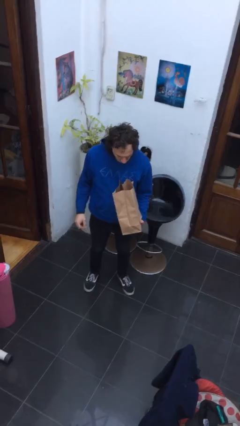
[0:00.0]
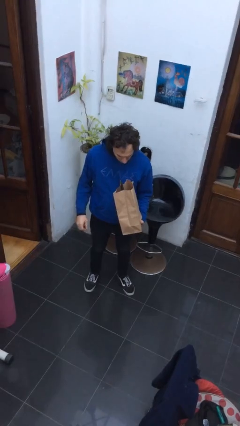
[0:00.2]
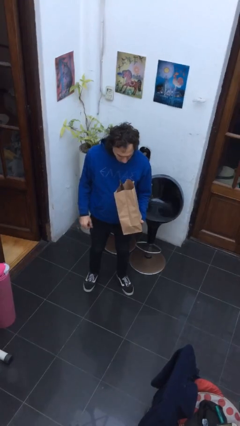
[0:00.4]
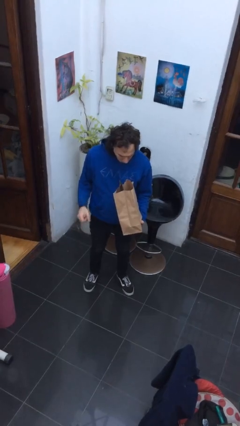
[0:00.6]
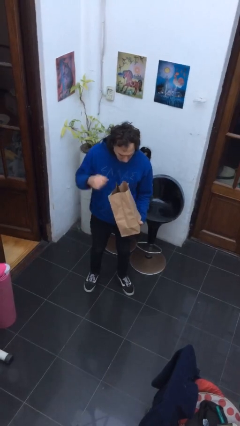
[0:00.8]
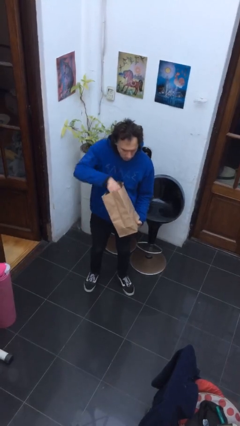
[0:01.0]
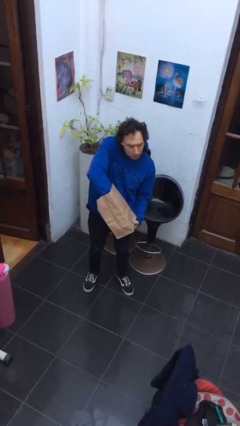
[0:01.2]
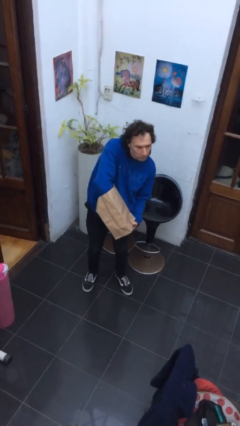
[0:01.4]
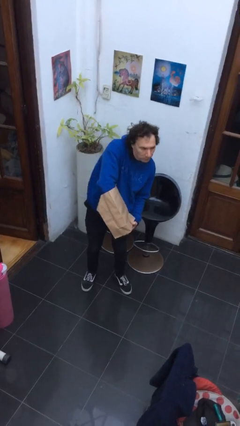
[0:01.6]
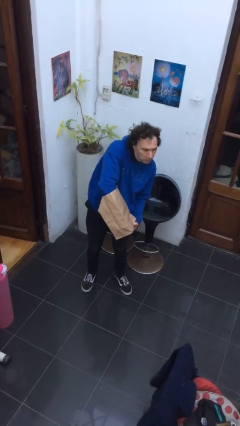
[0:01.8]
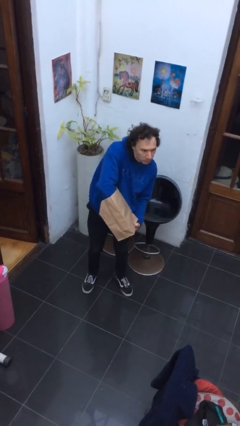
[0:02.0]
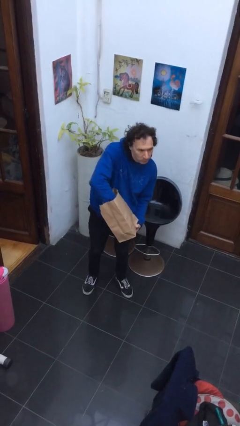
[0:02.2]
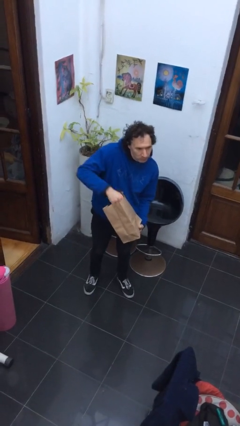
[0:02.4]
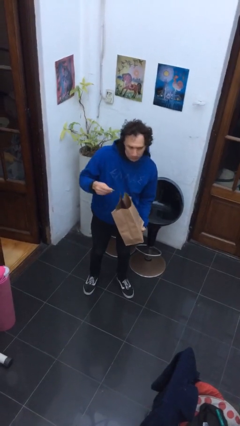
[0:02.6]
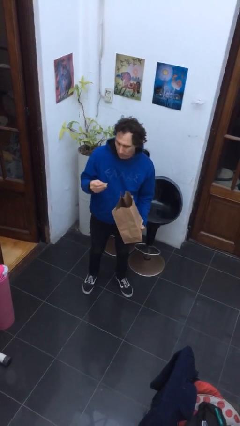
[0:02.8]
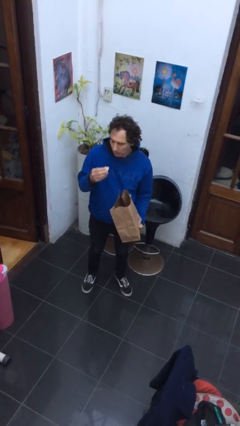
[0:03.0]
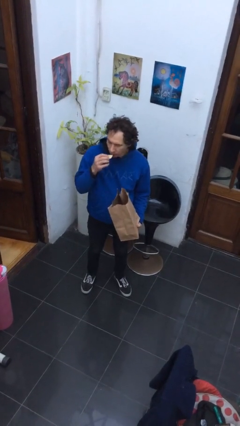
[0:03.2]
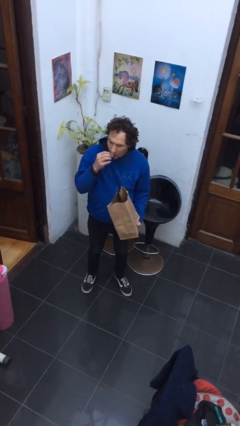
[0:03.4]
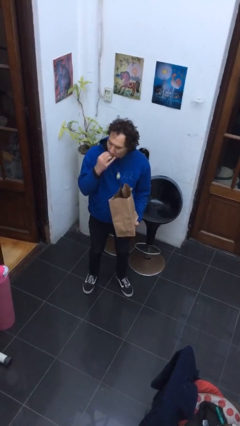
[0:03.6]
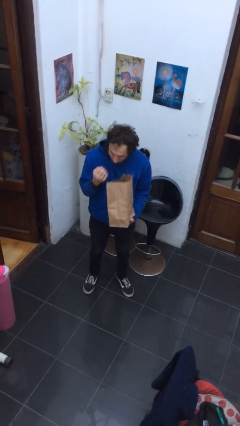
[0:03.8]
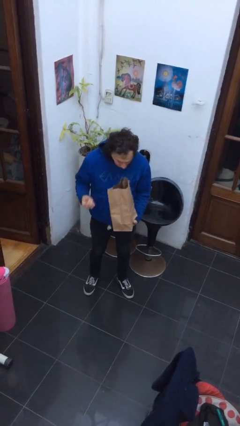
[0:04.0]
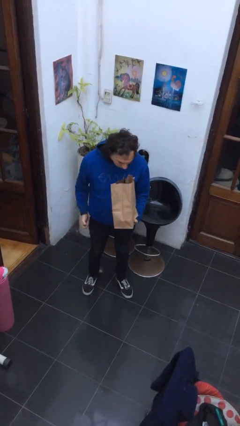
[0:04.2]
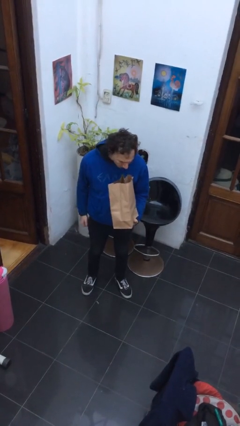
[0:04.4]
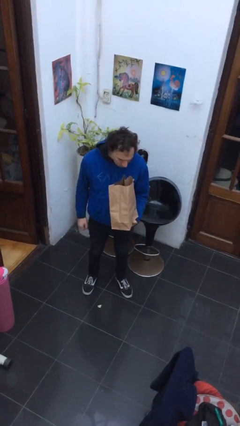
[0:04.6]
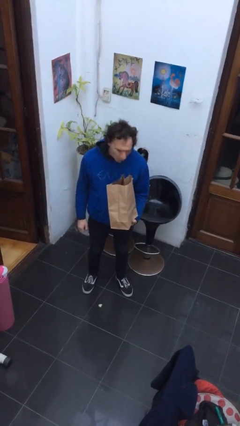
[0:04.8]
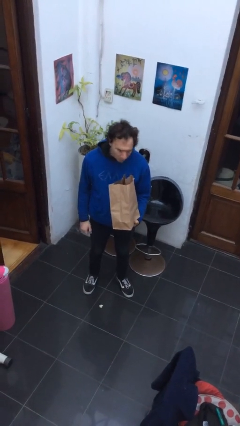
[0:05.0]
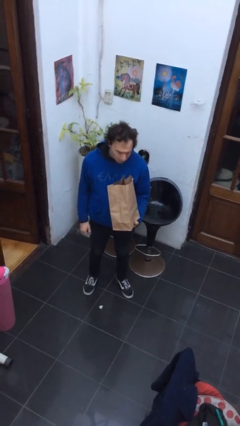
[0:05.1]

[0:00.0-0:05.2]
person eats snack from bag

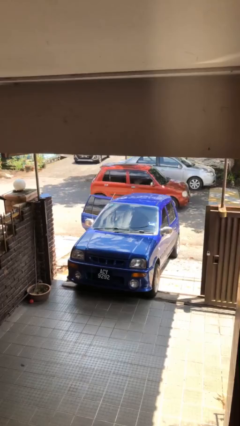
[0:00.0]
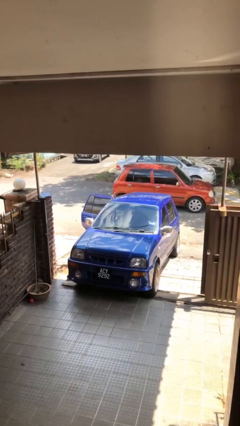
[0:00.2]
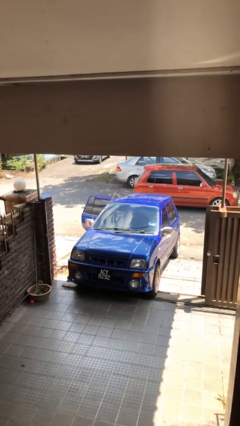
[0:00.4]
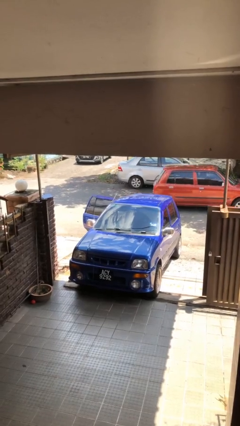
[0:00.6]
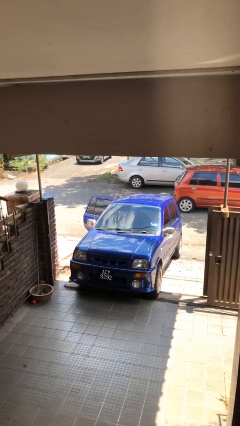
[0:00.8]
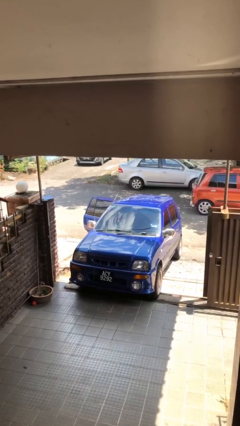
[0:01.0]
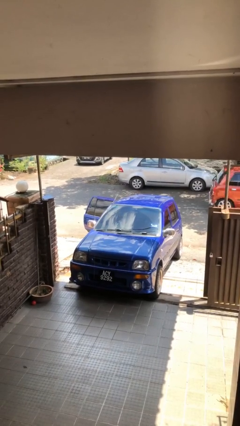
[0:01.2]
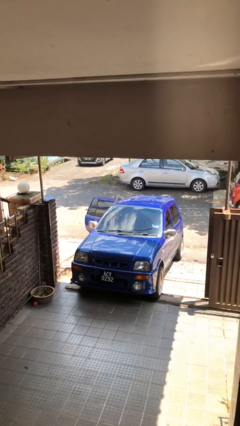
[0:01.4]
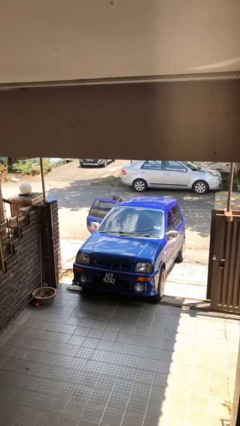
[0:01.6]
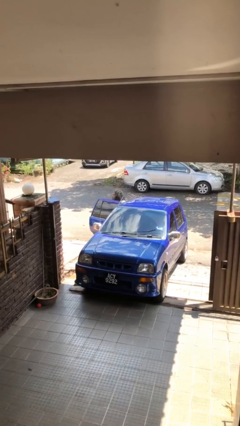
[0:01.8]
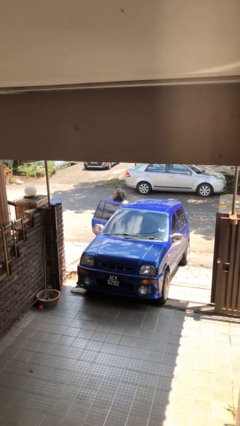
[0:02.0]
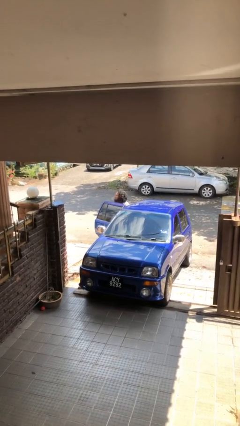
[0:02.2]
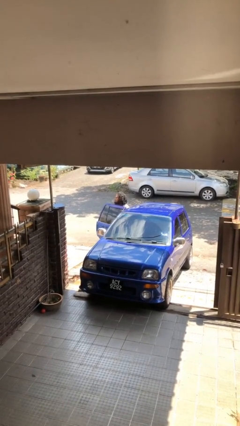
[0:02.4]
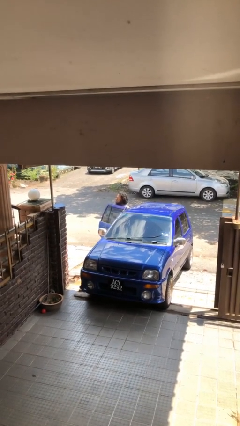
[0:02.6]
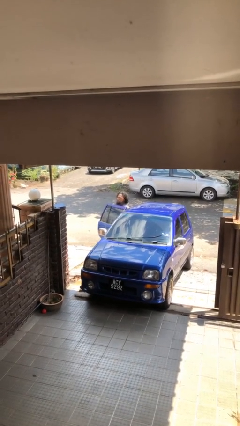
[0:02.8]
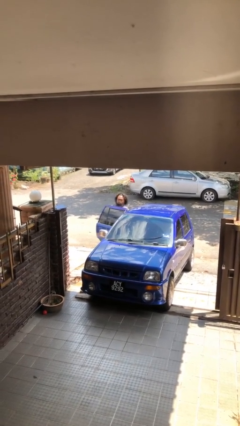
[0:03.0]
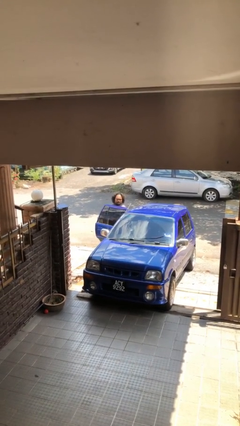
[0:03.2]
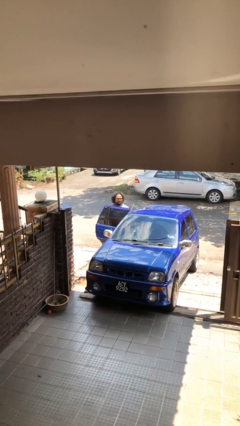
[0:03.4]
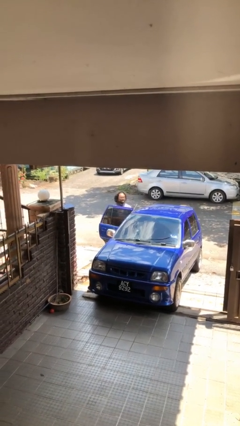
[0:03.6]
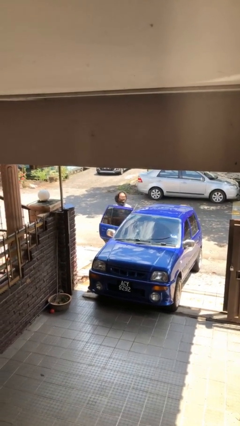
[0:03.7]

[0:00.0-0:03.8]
person exits car

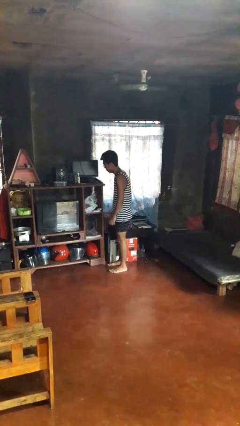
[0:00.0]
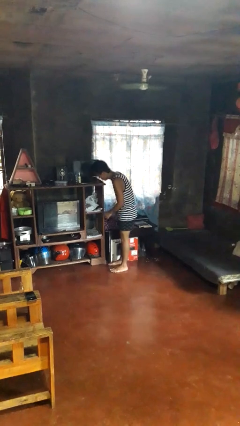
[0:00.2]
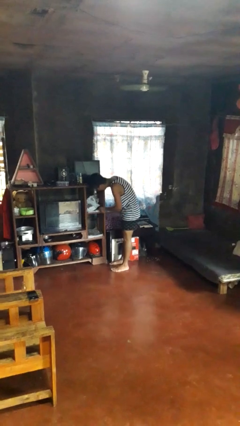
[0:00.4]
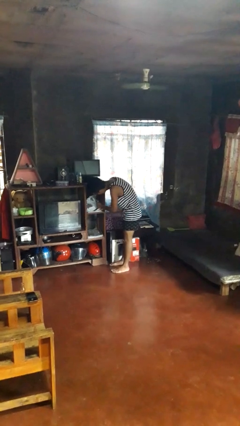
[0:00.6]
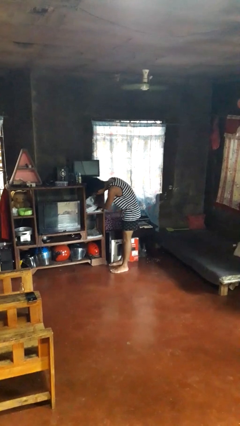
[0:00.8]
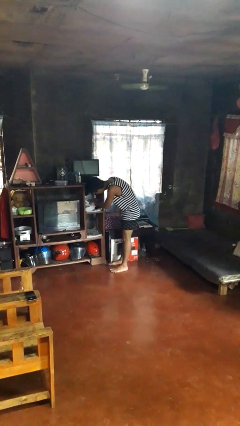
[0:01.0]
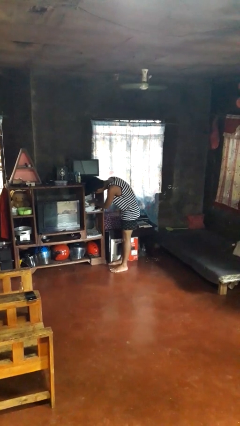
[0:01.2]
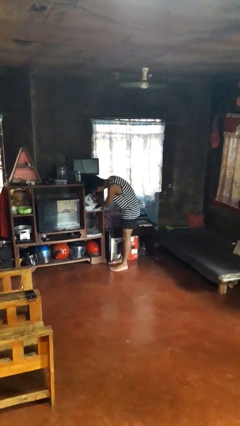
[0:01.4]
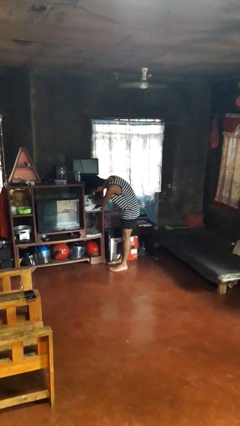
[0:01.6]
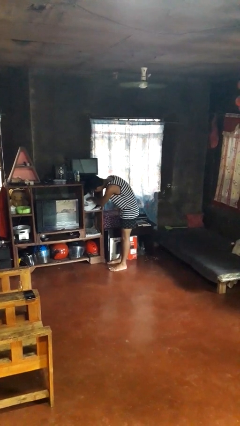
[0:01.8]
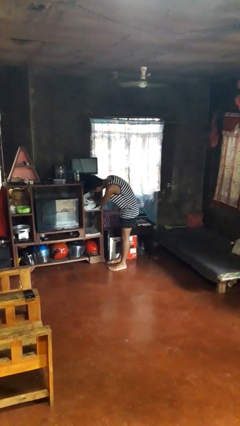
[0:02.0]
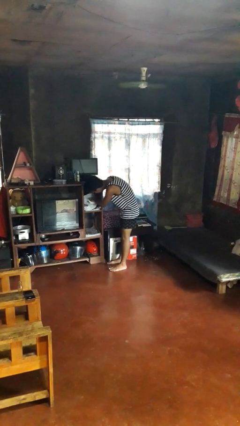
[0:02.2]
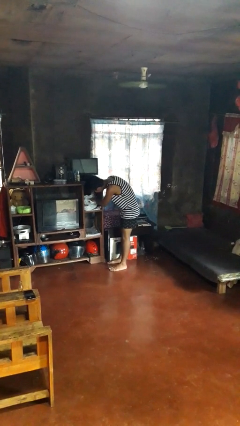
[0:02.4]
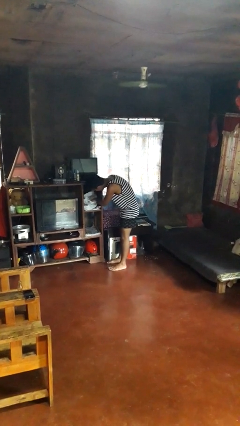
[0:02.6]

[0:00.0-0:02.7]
person searches in cabinet

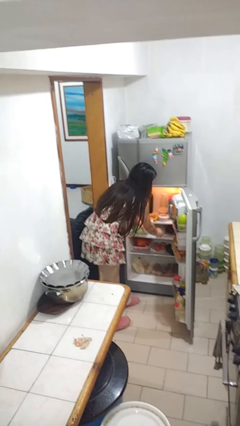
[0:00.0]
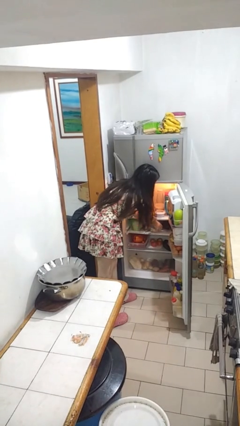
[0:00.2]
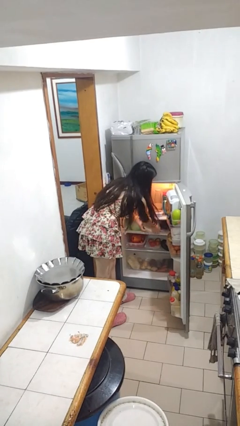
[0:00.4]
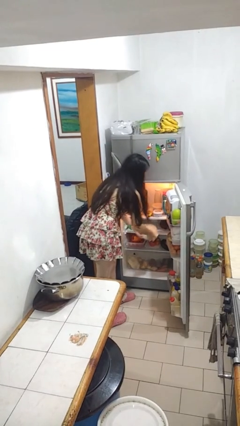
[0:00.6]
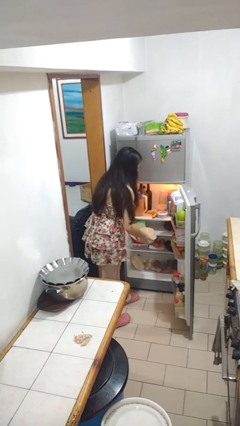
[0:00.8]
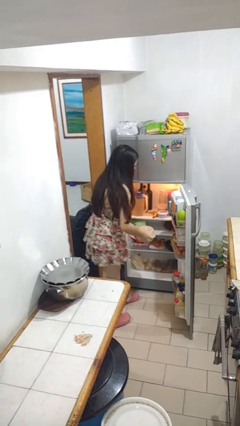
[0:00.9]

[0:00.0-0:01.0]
person takes object from refrigerator

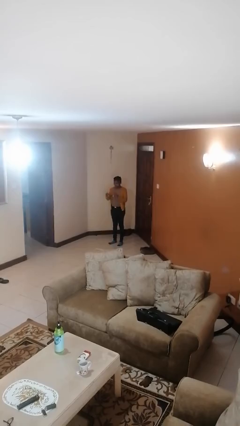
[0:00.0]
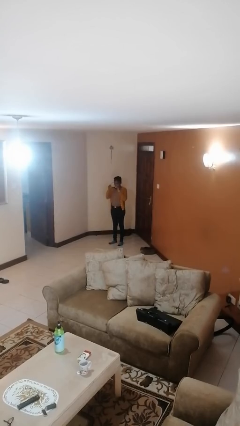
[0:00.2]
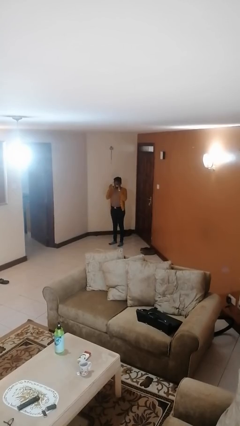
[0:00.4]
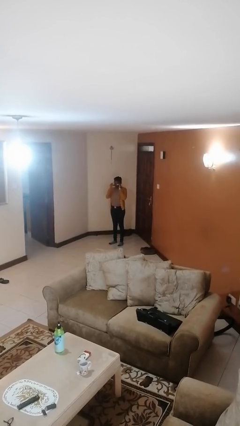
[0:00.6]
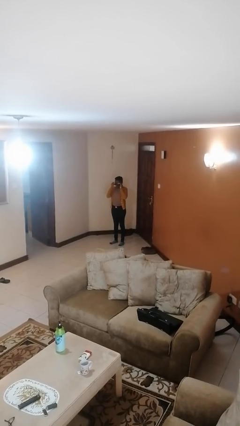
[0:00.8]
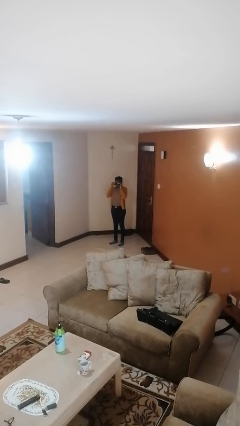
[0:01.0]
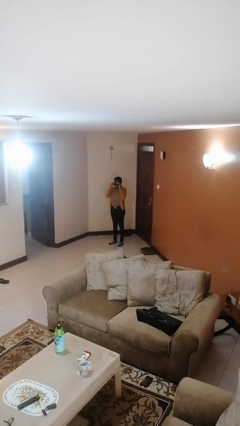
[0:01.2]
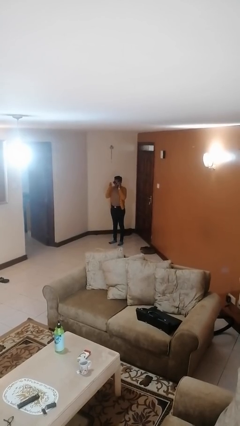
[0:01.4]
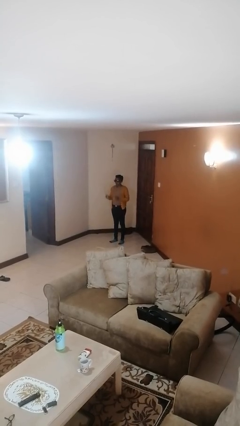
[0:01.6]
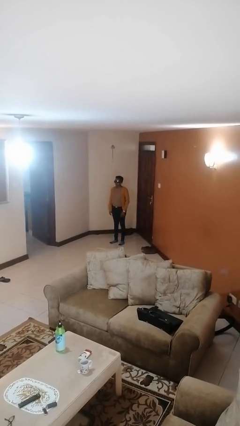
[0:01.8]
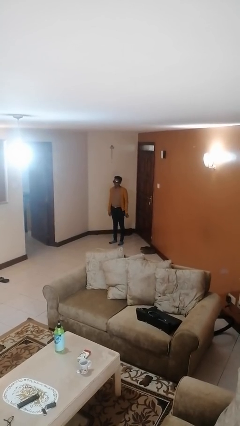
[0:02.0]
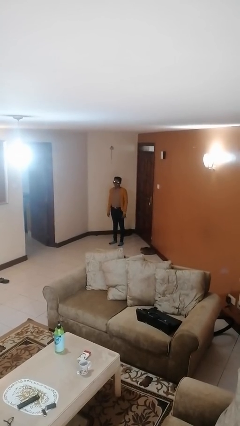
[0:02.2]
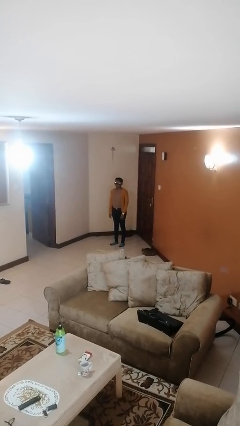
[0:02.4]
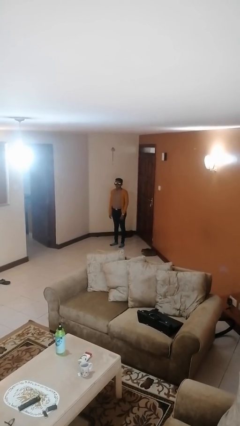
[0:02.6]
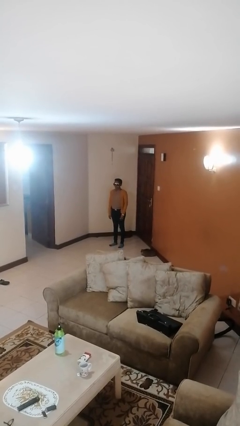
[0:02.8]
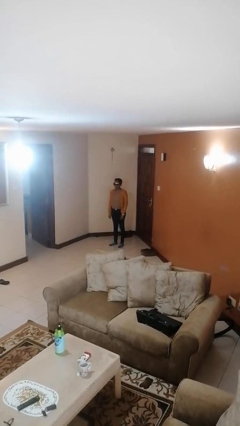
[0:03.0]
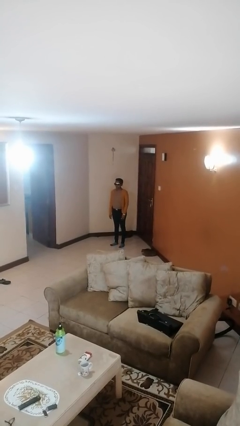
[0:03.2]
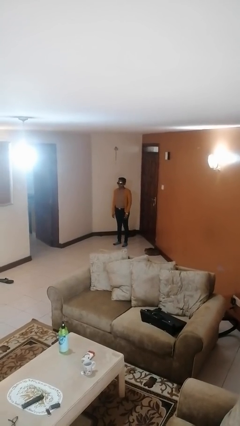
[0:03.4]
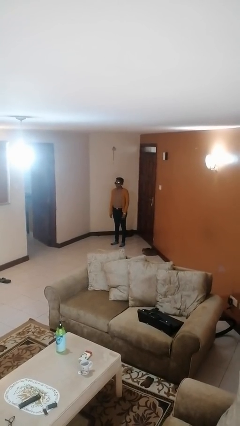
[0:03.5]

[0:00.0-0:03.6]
person puts on sunglasses

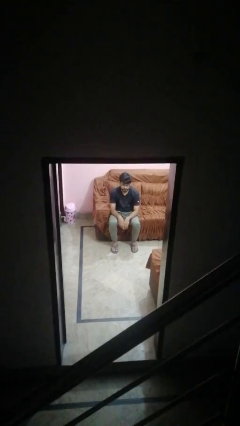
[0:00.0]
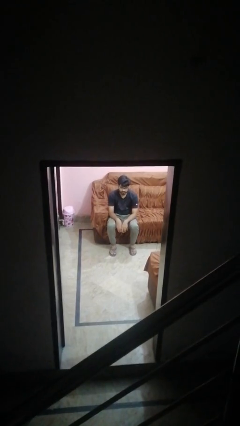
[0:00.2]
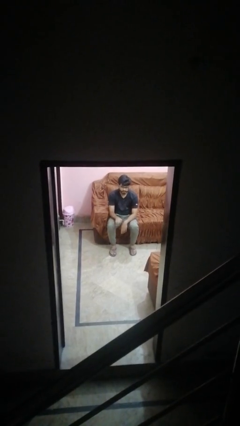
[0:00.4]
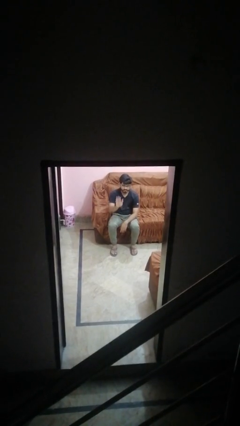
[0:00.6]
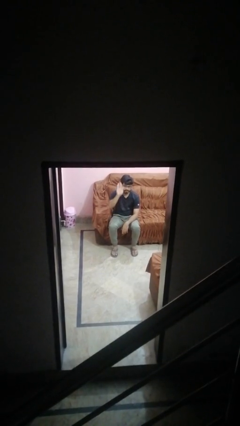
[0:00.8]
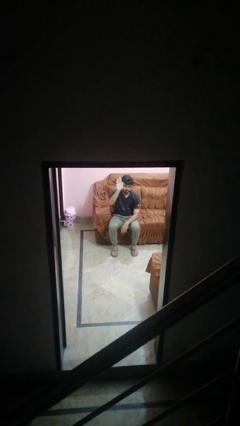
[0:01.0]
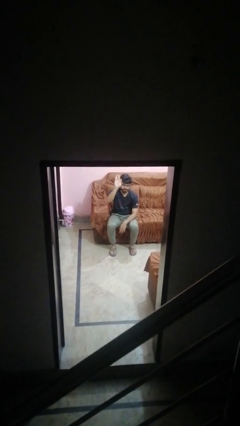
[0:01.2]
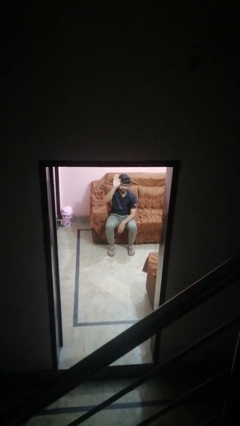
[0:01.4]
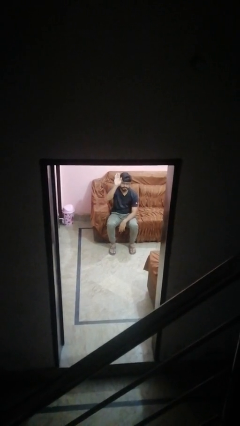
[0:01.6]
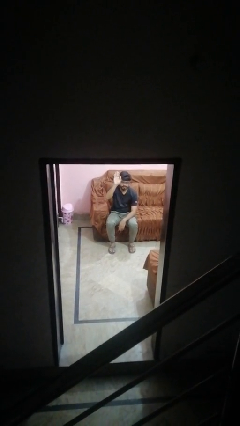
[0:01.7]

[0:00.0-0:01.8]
person gestures raise hand
